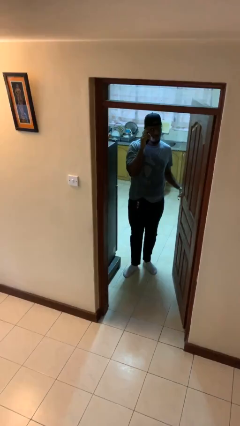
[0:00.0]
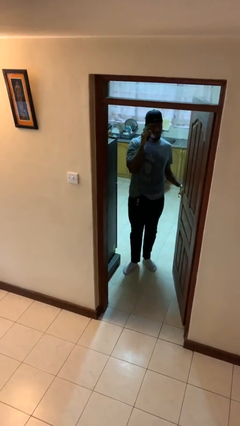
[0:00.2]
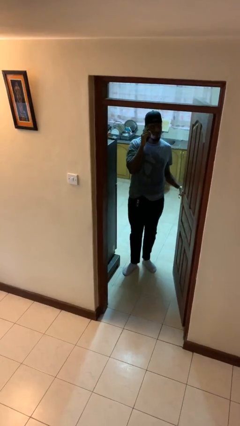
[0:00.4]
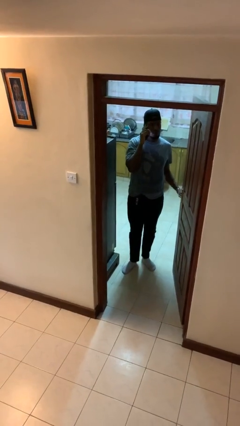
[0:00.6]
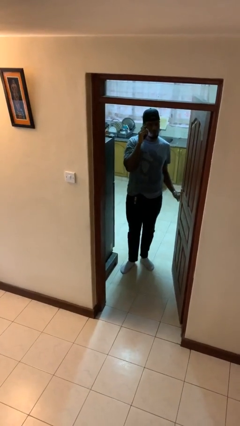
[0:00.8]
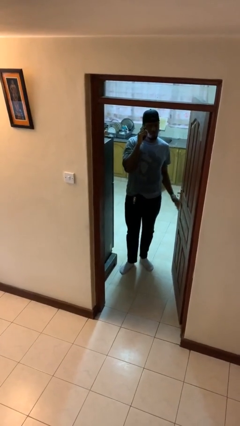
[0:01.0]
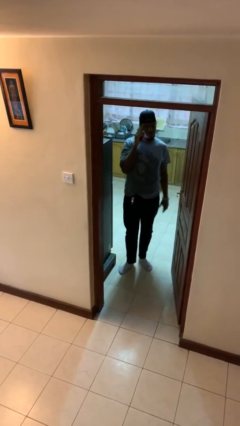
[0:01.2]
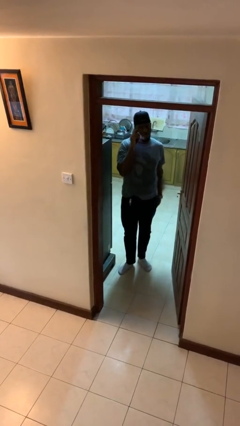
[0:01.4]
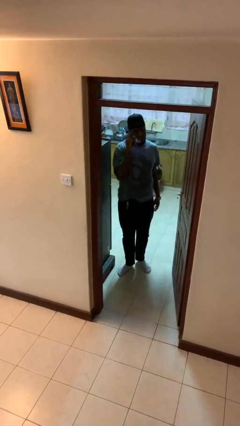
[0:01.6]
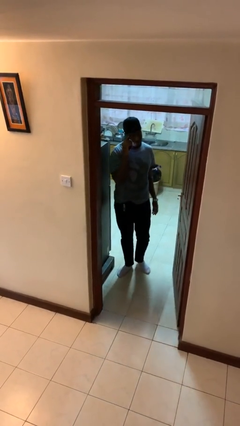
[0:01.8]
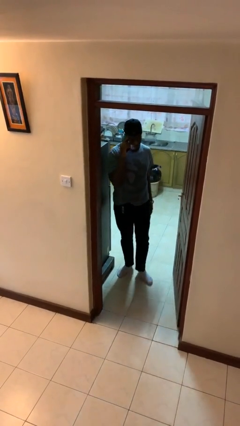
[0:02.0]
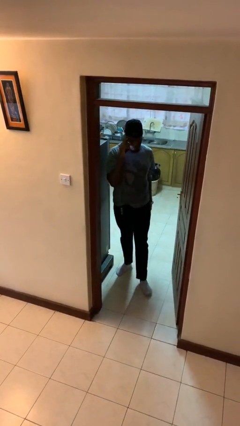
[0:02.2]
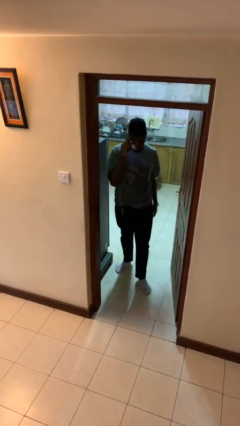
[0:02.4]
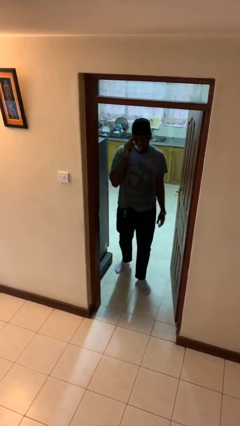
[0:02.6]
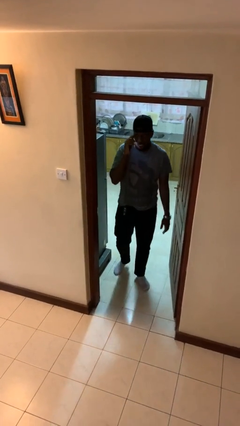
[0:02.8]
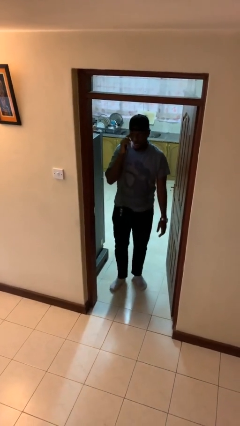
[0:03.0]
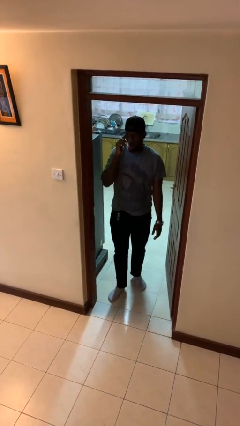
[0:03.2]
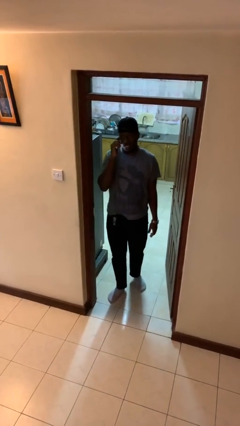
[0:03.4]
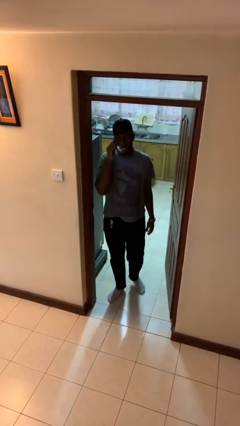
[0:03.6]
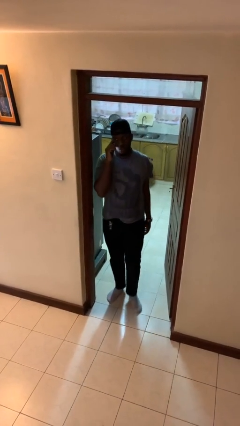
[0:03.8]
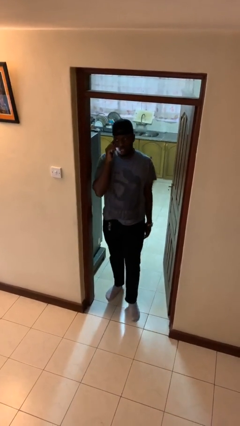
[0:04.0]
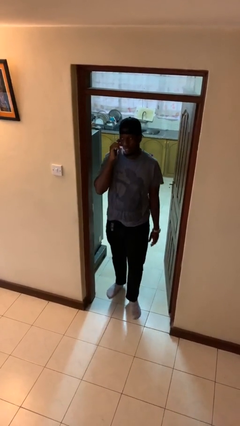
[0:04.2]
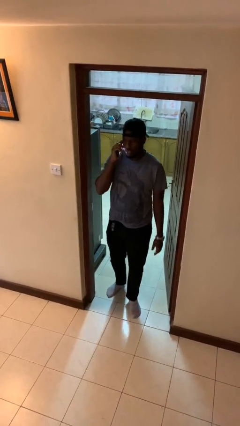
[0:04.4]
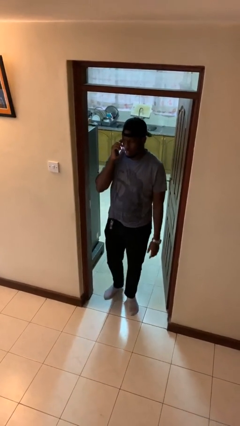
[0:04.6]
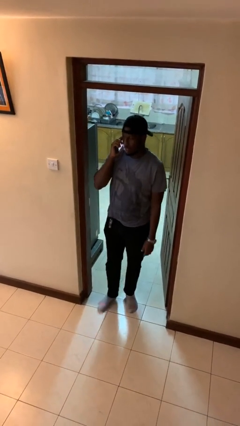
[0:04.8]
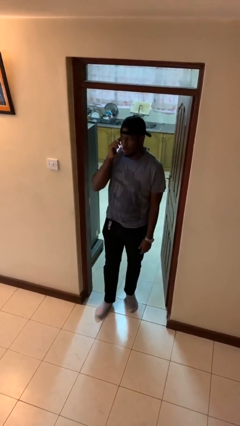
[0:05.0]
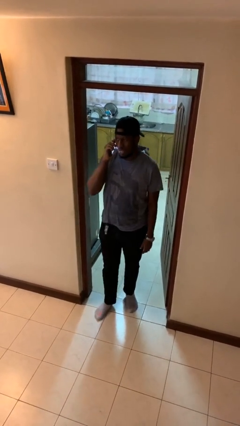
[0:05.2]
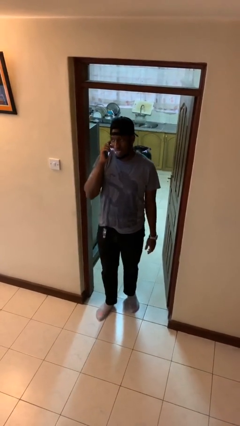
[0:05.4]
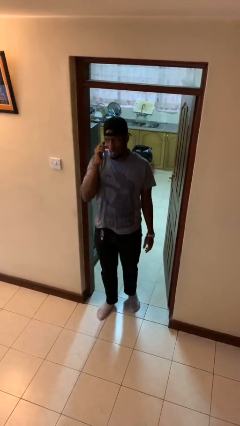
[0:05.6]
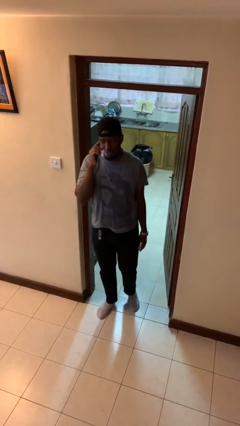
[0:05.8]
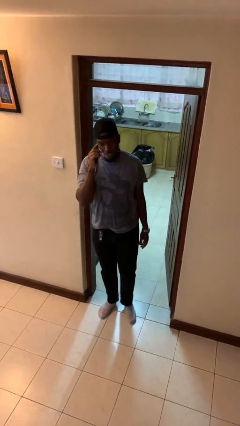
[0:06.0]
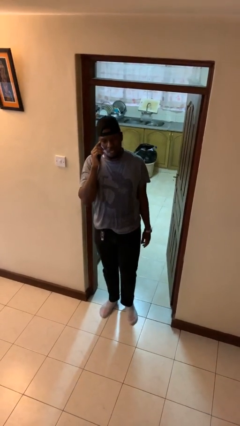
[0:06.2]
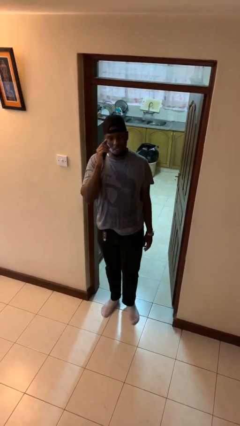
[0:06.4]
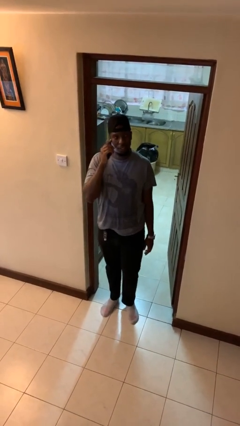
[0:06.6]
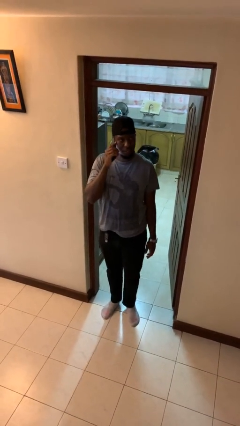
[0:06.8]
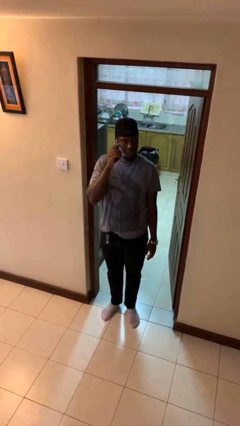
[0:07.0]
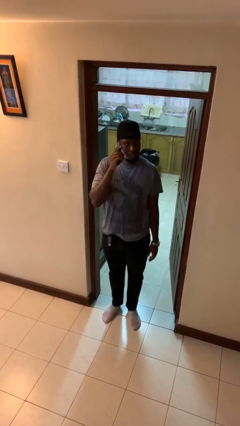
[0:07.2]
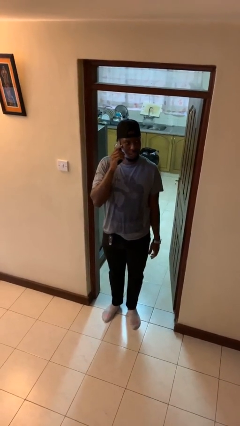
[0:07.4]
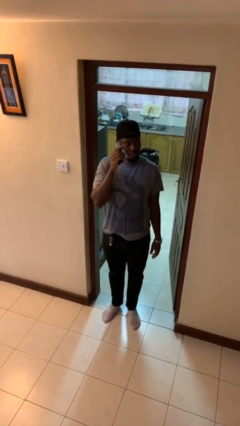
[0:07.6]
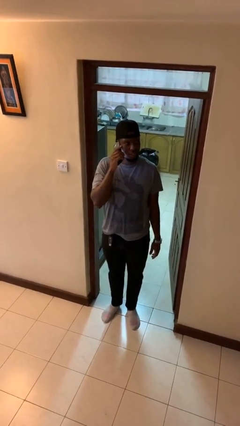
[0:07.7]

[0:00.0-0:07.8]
person enters scene through structure

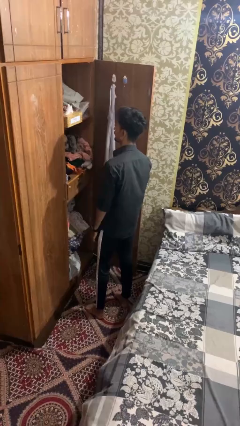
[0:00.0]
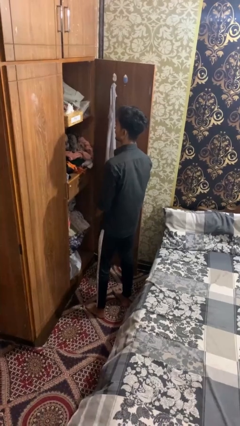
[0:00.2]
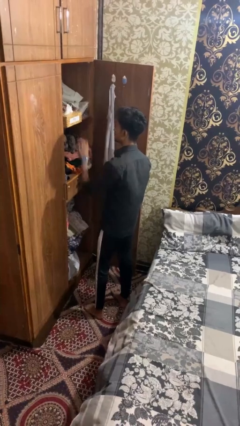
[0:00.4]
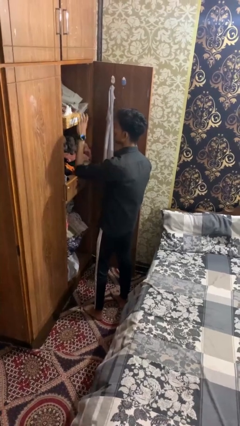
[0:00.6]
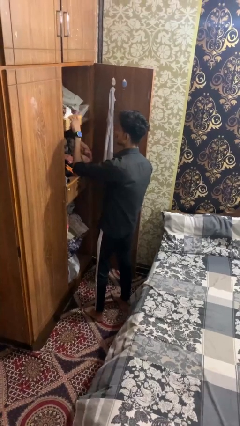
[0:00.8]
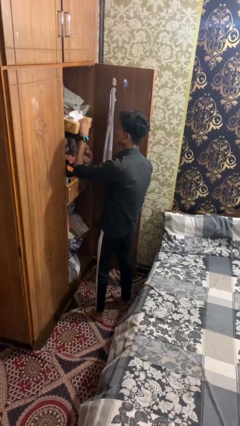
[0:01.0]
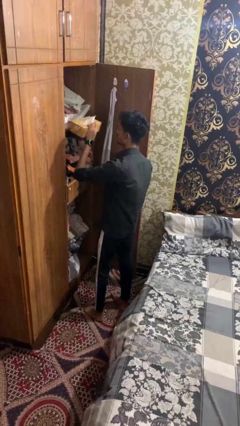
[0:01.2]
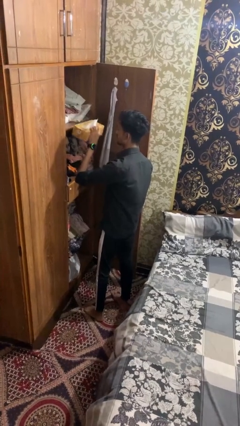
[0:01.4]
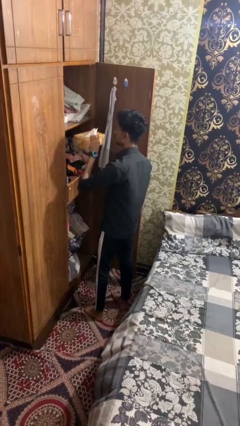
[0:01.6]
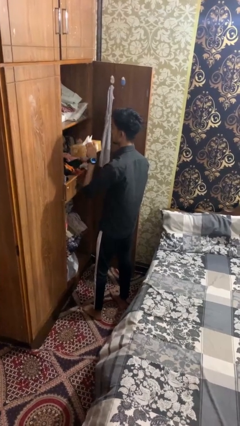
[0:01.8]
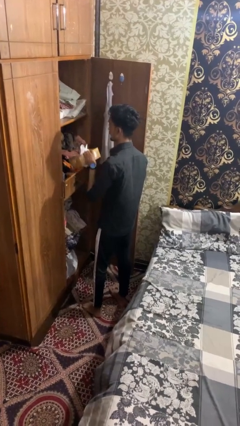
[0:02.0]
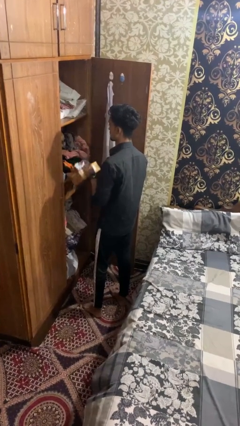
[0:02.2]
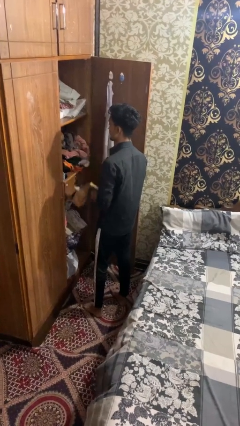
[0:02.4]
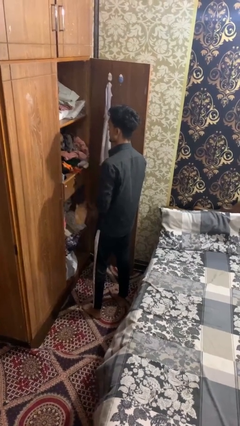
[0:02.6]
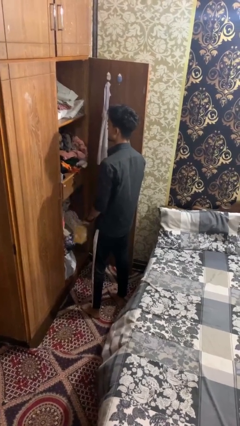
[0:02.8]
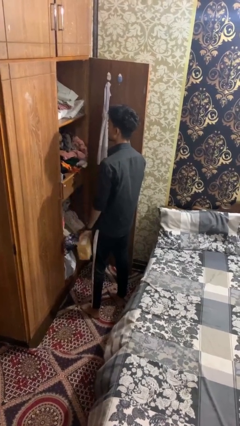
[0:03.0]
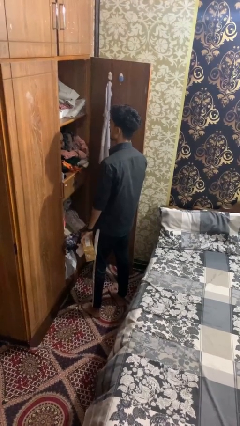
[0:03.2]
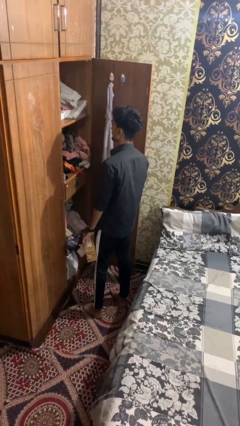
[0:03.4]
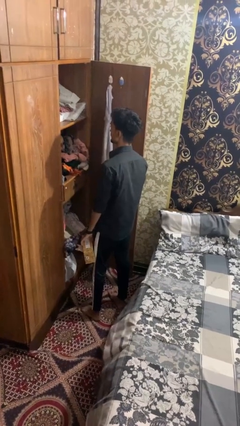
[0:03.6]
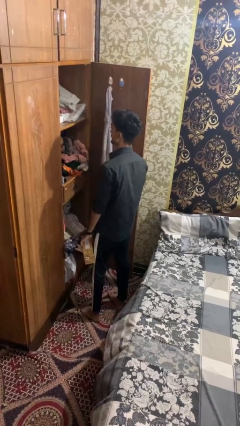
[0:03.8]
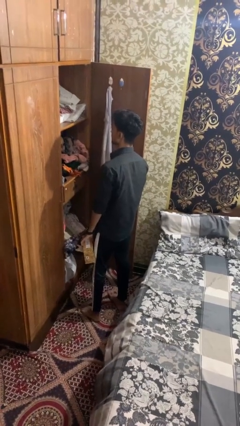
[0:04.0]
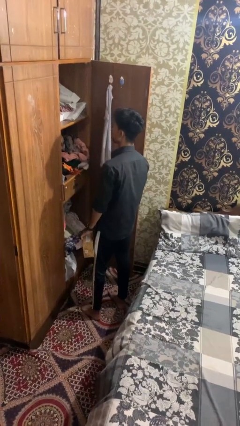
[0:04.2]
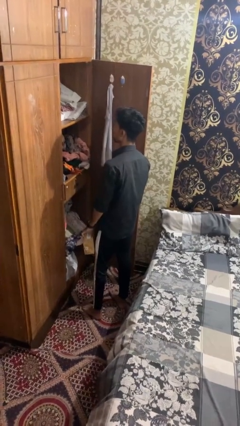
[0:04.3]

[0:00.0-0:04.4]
person picks up object from countertop

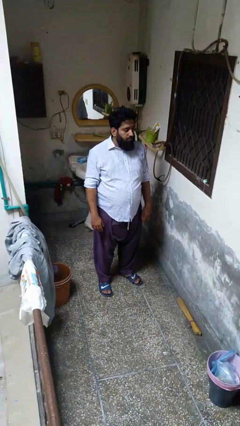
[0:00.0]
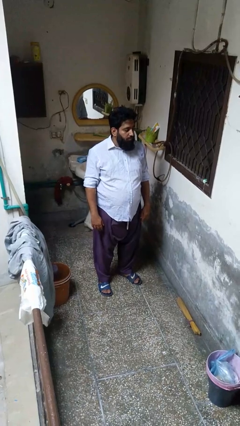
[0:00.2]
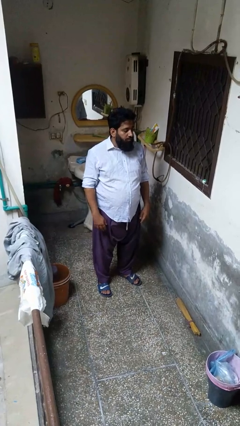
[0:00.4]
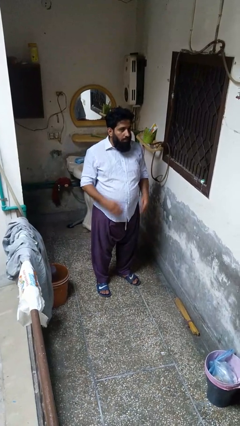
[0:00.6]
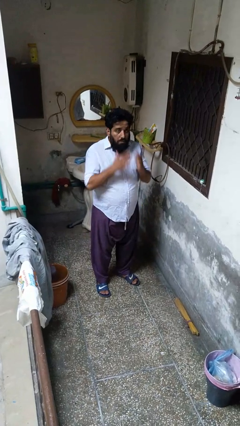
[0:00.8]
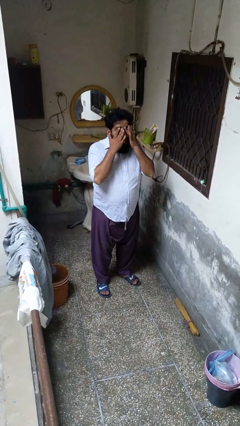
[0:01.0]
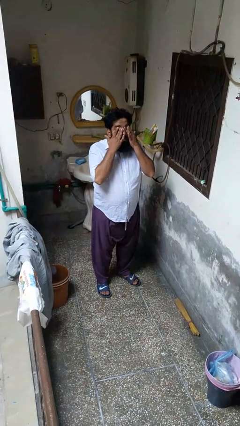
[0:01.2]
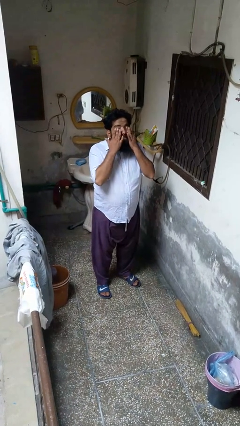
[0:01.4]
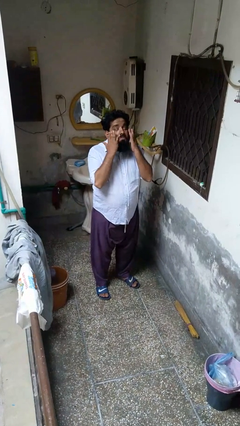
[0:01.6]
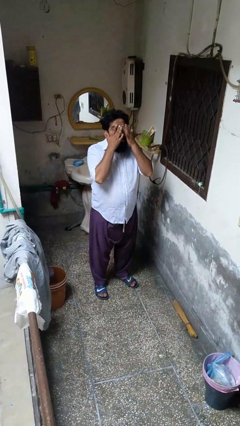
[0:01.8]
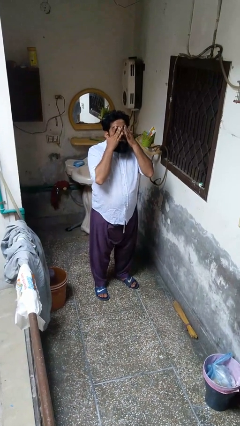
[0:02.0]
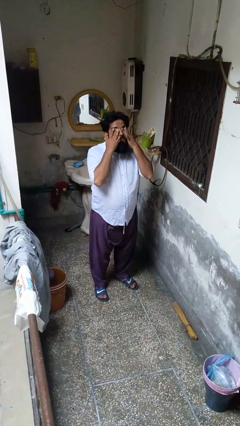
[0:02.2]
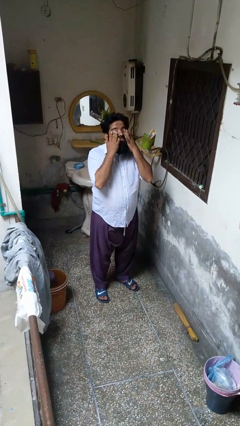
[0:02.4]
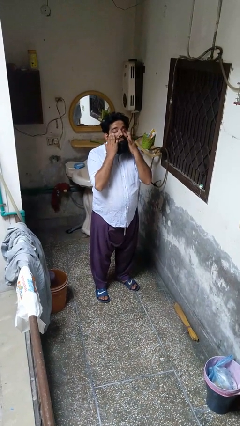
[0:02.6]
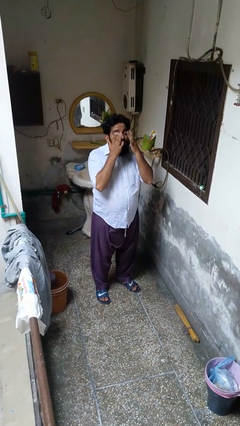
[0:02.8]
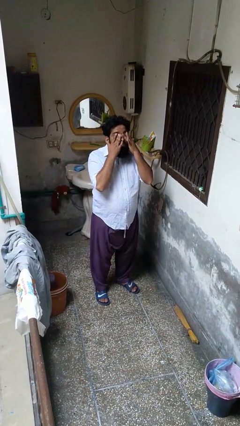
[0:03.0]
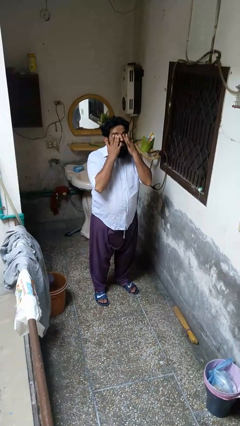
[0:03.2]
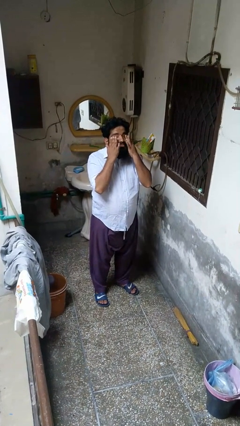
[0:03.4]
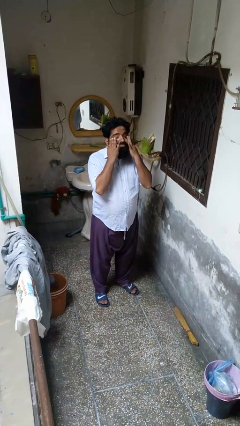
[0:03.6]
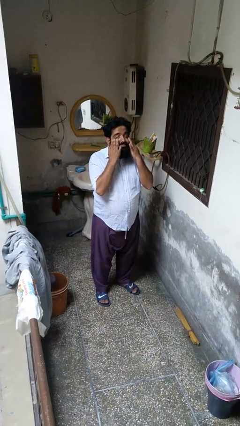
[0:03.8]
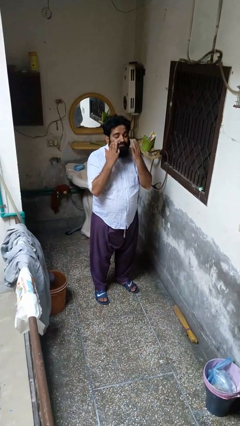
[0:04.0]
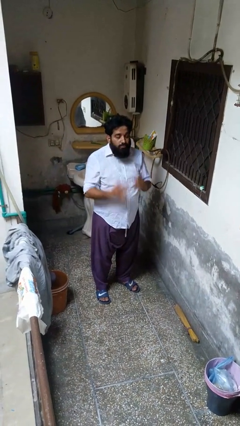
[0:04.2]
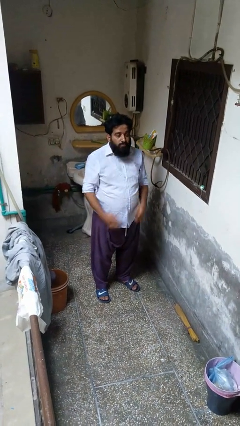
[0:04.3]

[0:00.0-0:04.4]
person rubs eyes

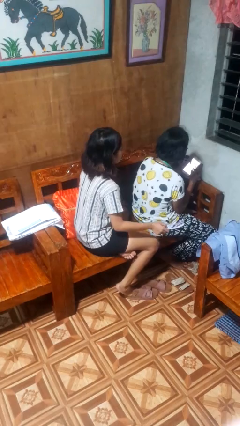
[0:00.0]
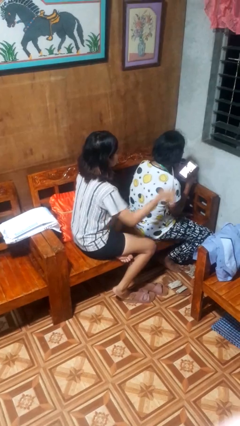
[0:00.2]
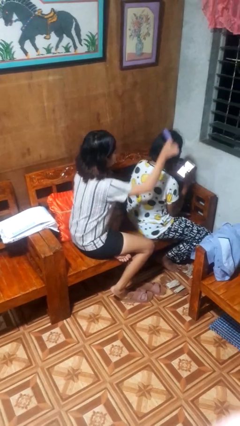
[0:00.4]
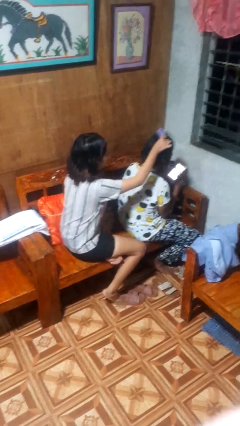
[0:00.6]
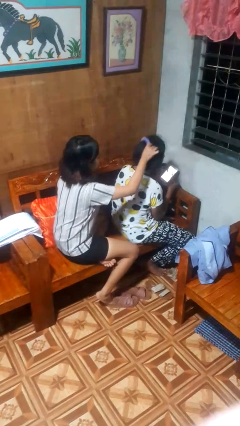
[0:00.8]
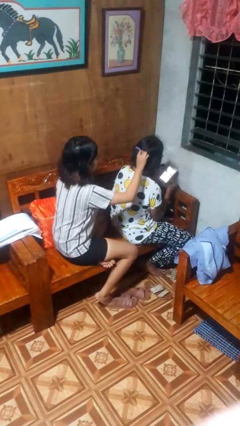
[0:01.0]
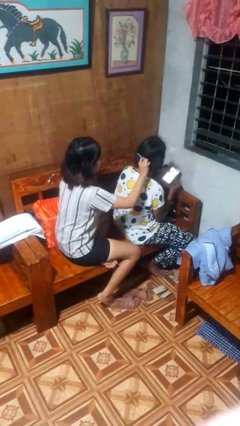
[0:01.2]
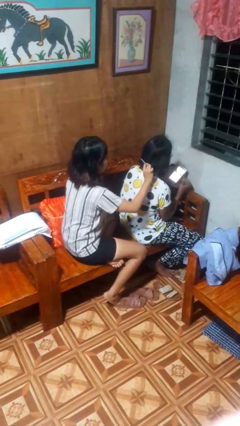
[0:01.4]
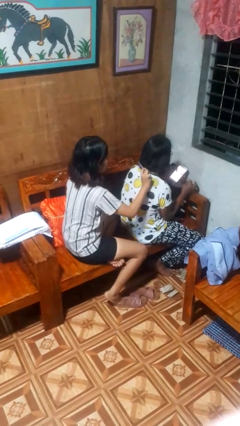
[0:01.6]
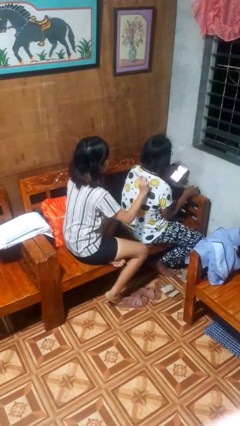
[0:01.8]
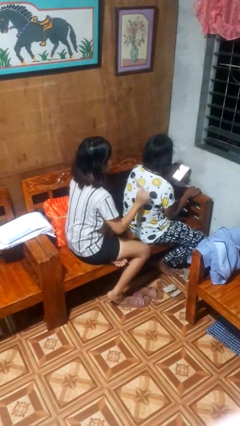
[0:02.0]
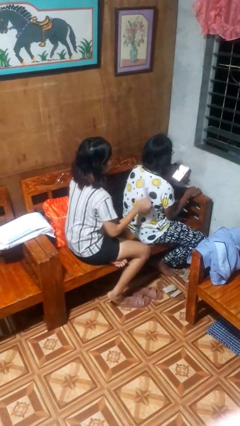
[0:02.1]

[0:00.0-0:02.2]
person brushes hair of person
